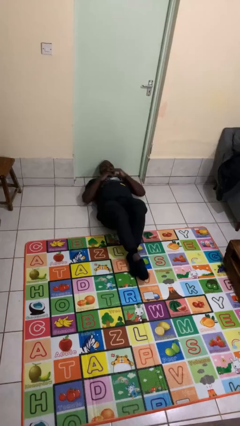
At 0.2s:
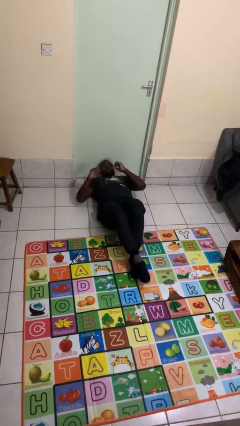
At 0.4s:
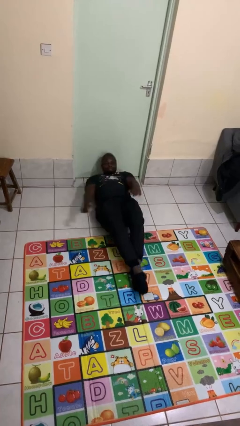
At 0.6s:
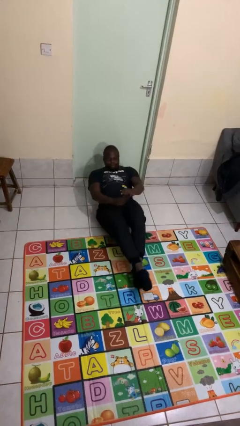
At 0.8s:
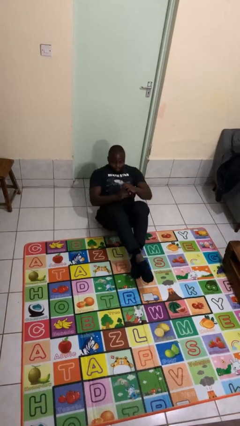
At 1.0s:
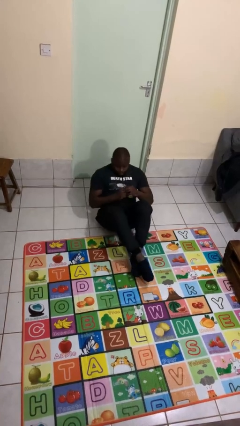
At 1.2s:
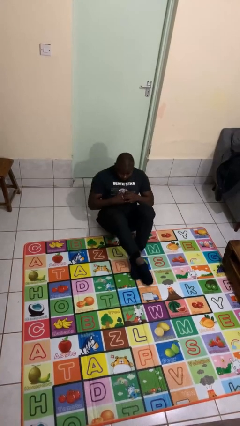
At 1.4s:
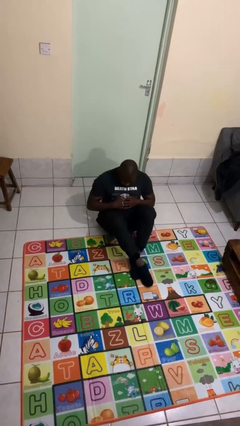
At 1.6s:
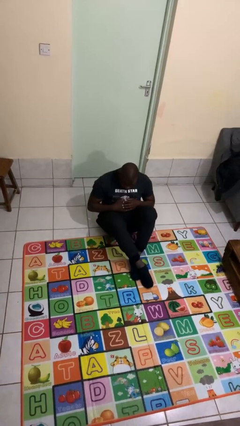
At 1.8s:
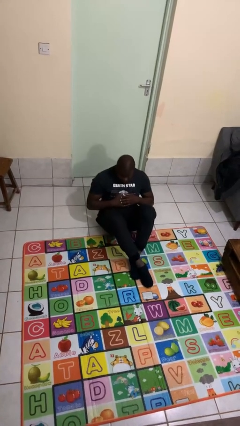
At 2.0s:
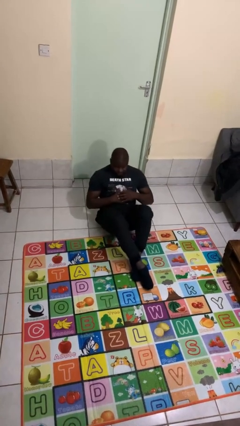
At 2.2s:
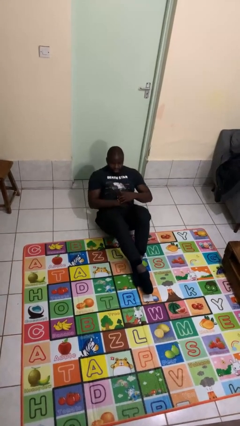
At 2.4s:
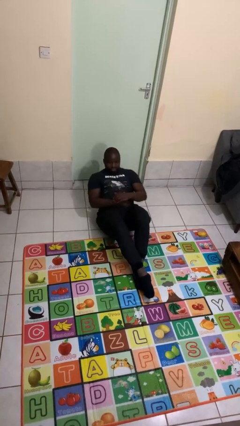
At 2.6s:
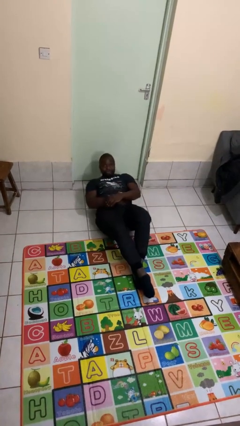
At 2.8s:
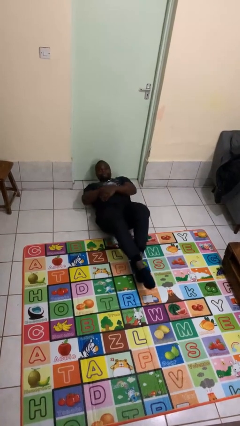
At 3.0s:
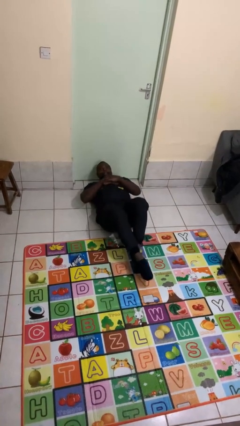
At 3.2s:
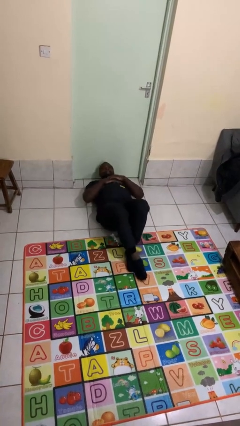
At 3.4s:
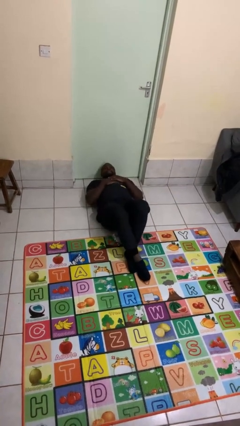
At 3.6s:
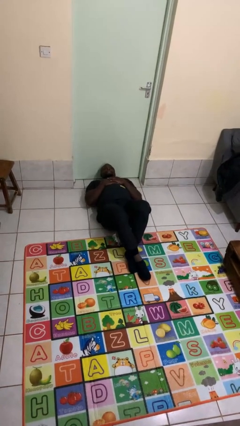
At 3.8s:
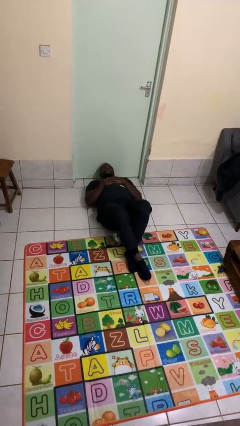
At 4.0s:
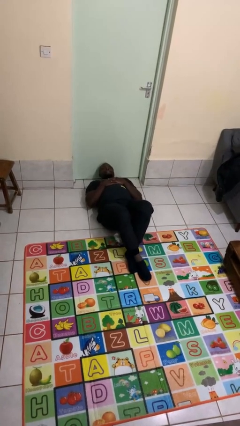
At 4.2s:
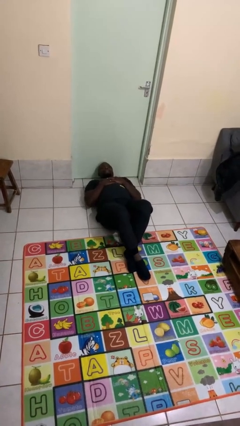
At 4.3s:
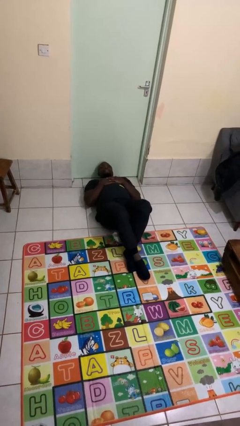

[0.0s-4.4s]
person exercises with situp

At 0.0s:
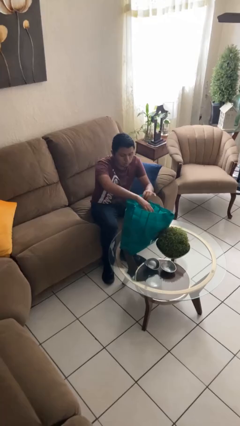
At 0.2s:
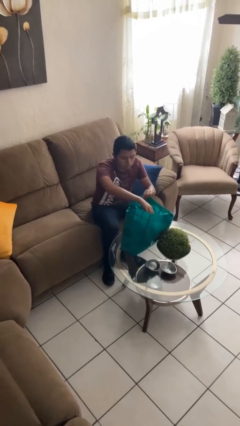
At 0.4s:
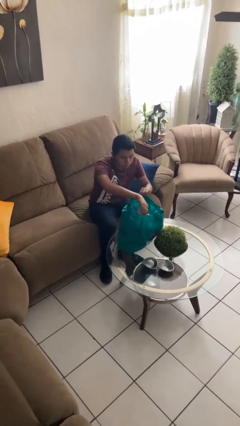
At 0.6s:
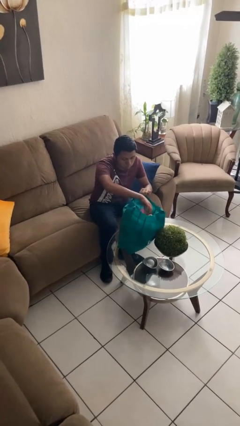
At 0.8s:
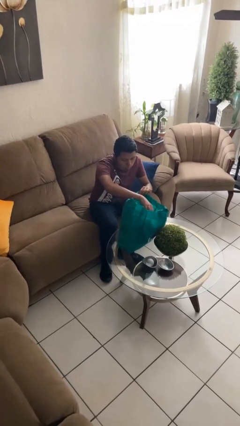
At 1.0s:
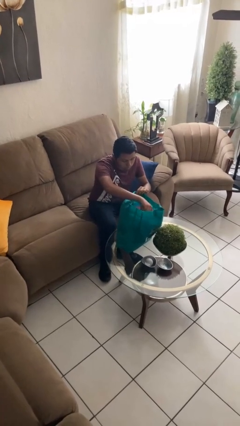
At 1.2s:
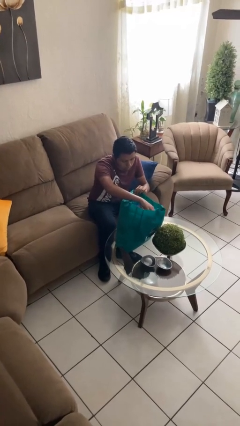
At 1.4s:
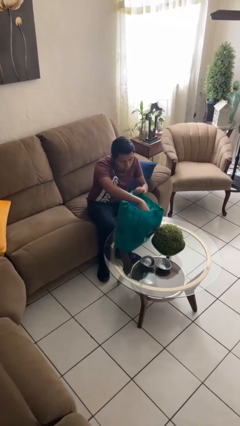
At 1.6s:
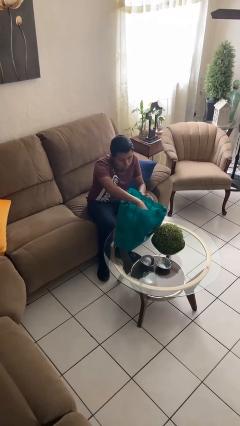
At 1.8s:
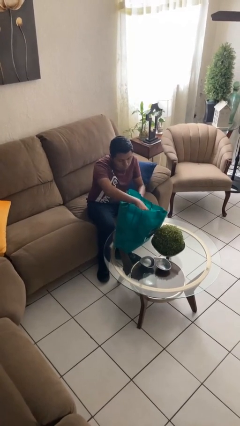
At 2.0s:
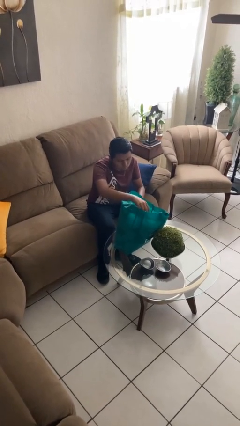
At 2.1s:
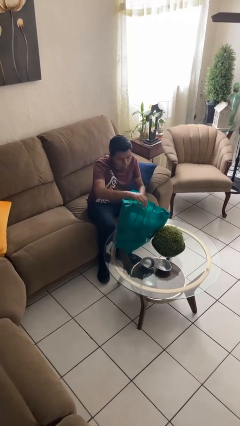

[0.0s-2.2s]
person searches in bag

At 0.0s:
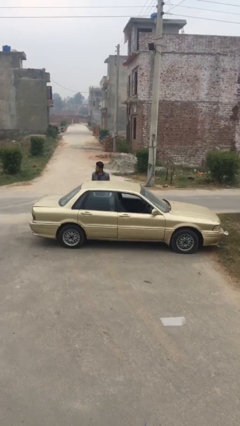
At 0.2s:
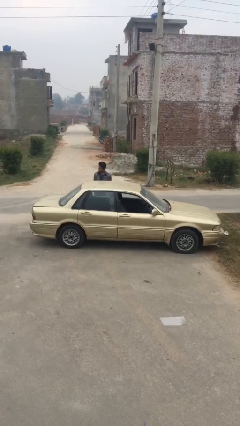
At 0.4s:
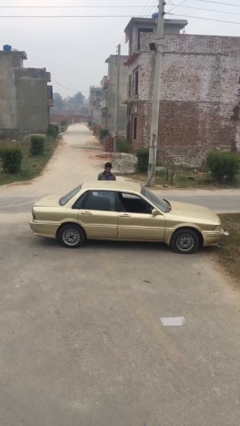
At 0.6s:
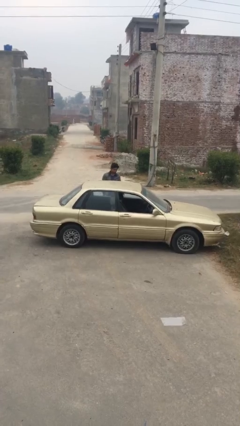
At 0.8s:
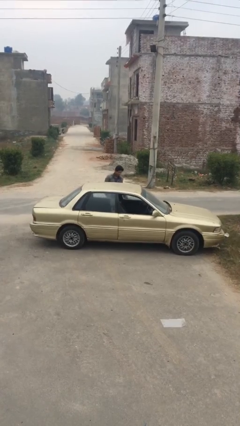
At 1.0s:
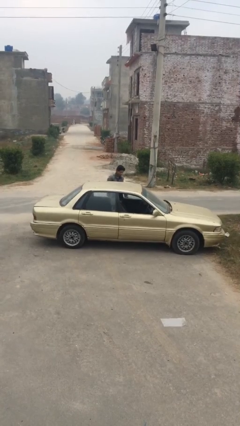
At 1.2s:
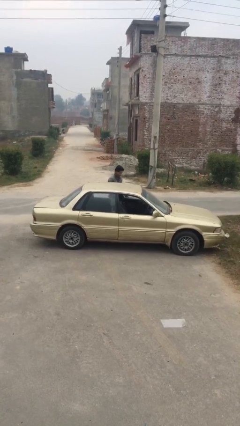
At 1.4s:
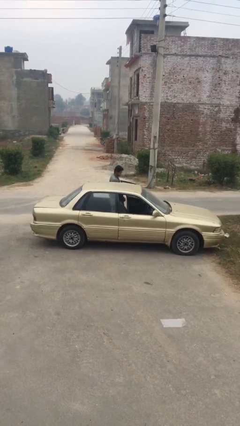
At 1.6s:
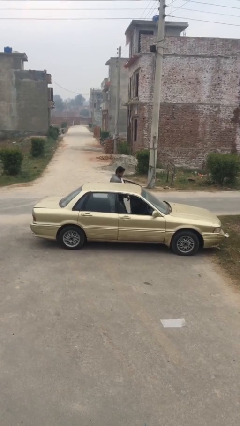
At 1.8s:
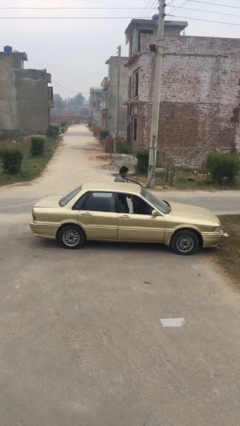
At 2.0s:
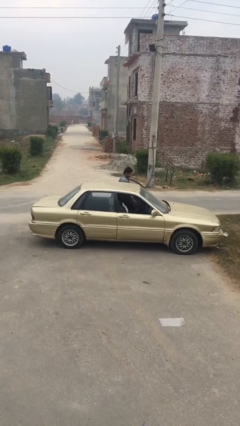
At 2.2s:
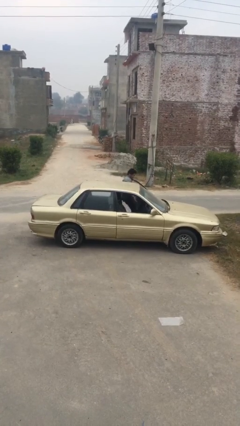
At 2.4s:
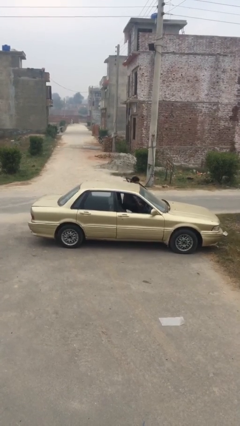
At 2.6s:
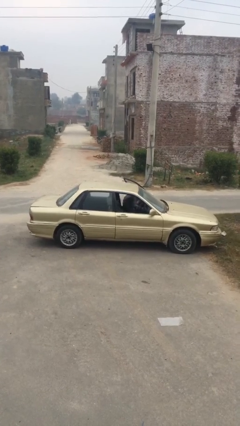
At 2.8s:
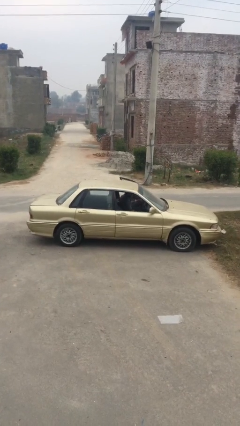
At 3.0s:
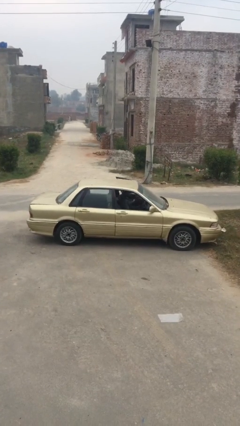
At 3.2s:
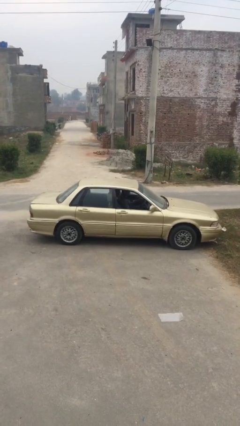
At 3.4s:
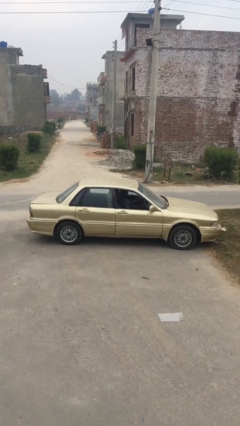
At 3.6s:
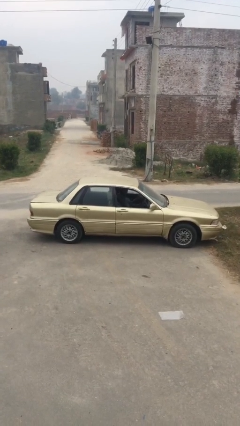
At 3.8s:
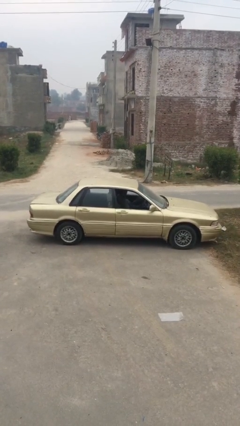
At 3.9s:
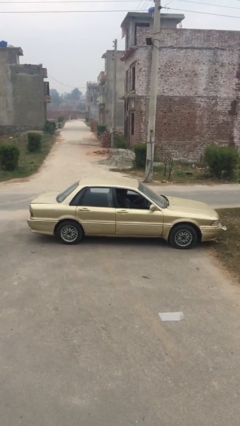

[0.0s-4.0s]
car picks up person

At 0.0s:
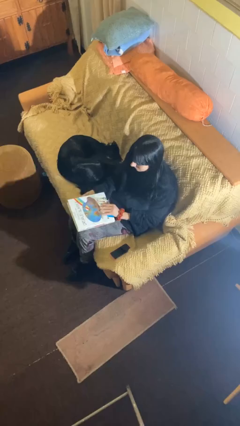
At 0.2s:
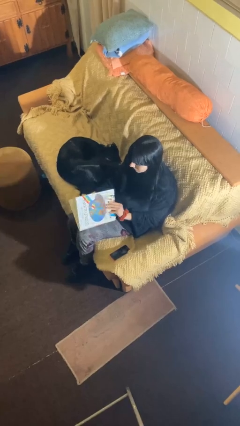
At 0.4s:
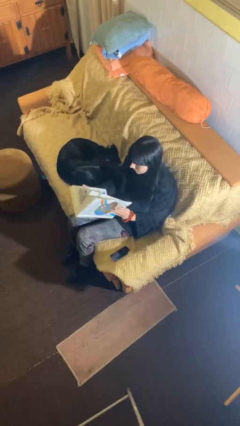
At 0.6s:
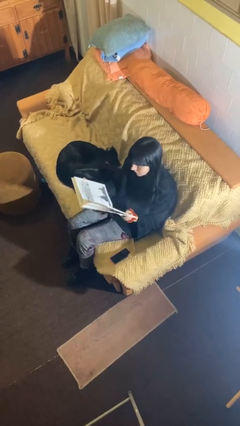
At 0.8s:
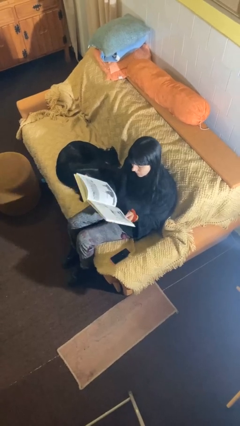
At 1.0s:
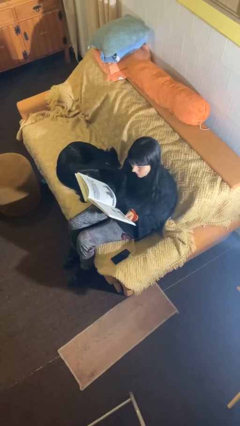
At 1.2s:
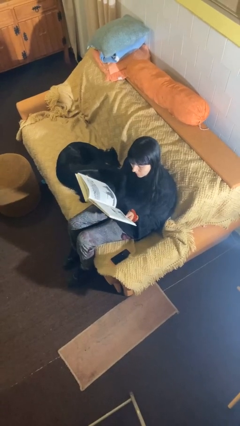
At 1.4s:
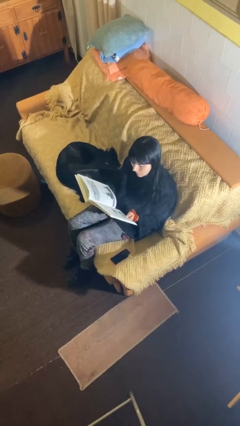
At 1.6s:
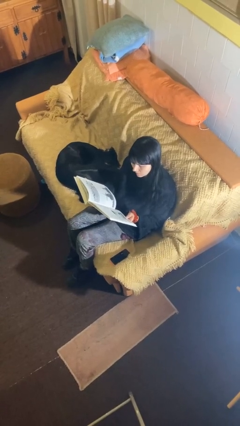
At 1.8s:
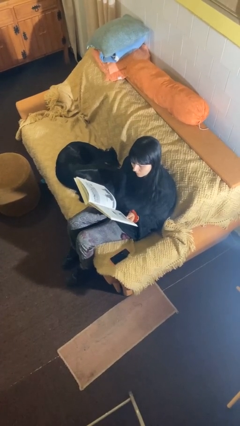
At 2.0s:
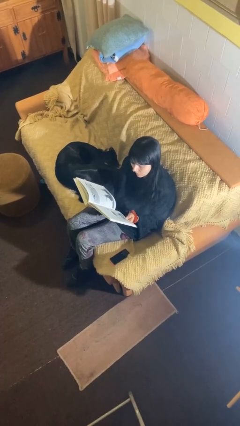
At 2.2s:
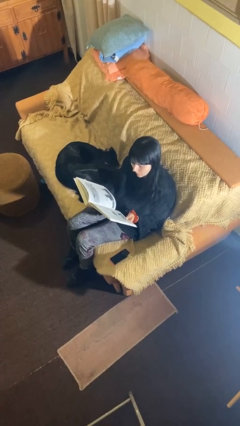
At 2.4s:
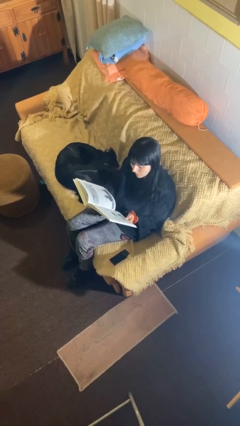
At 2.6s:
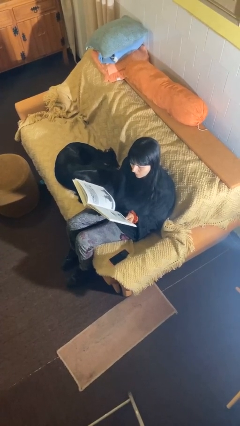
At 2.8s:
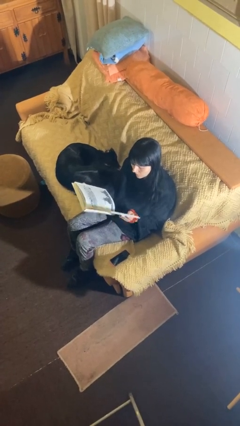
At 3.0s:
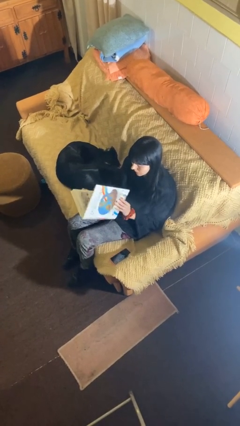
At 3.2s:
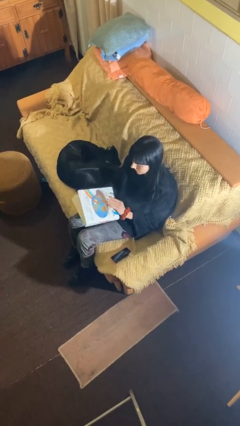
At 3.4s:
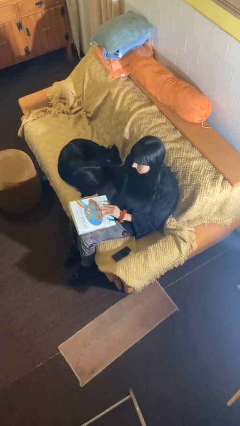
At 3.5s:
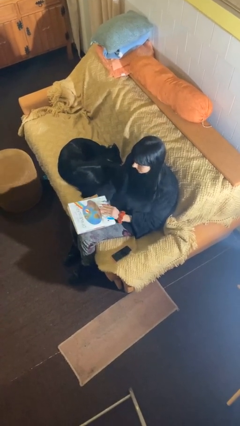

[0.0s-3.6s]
person reads document

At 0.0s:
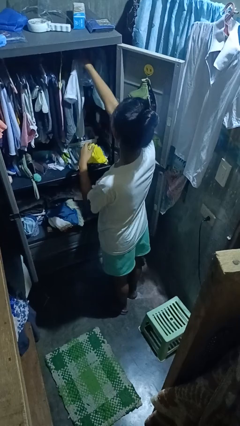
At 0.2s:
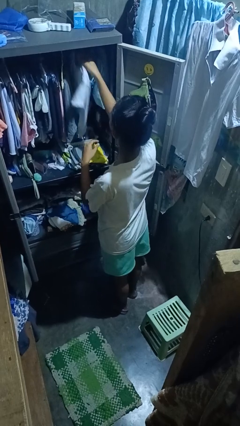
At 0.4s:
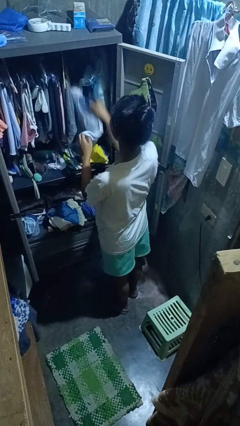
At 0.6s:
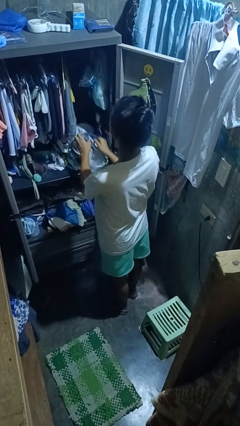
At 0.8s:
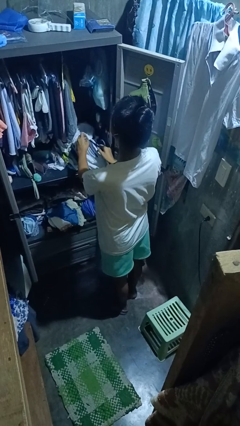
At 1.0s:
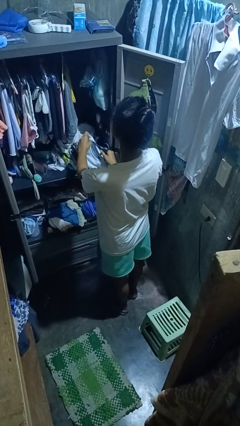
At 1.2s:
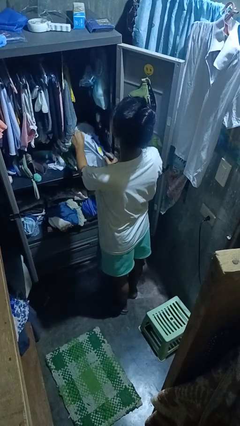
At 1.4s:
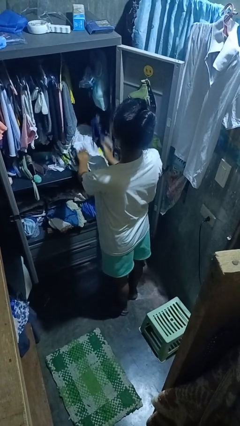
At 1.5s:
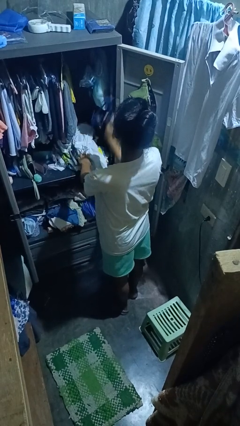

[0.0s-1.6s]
person takes clothes from closet

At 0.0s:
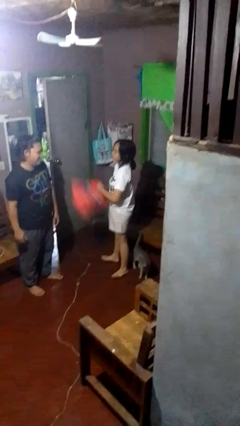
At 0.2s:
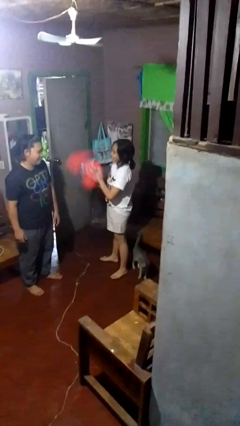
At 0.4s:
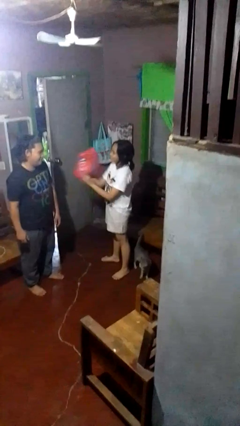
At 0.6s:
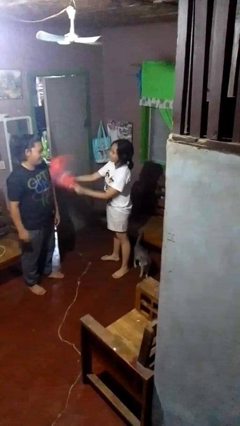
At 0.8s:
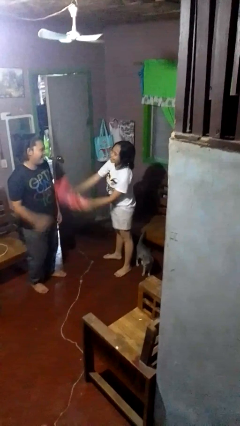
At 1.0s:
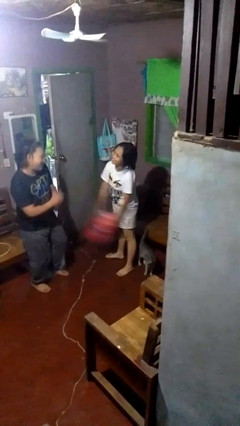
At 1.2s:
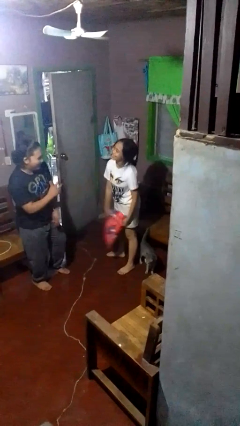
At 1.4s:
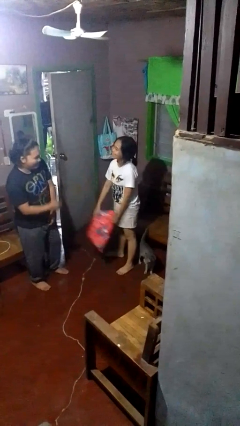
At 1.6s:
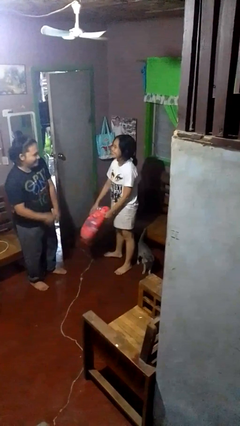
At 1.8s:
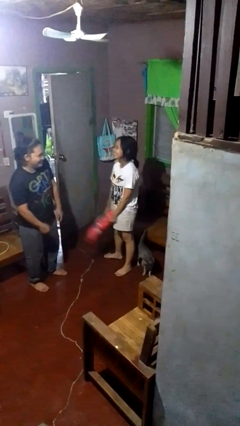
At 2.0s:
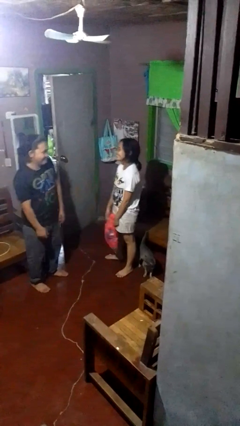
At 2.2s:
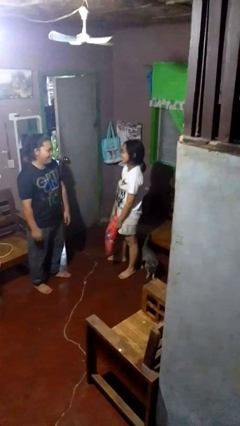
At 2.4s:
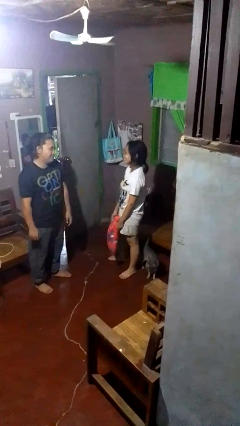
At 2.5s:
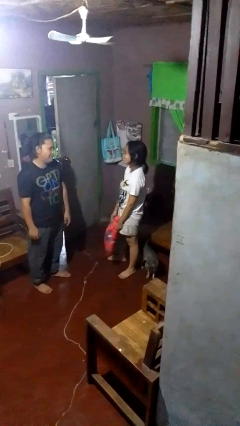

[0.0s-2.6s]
person hits person with pillow
